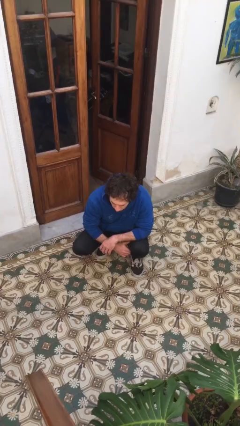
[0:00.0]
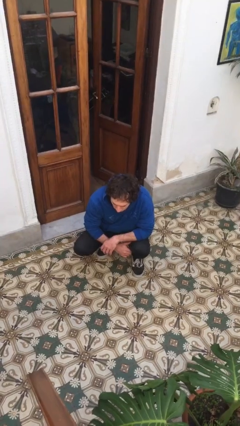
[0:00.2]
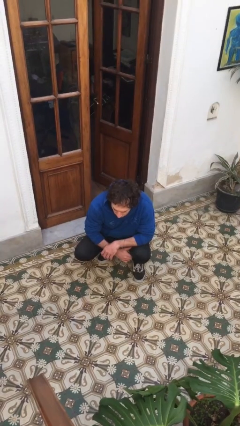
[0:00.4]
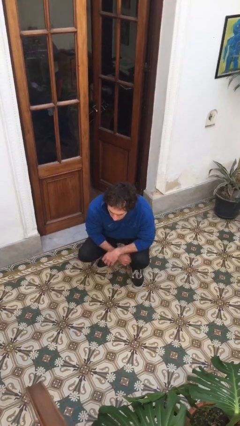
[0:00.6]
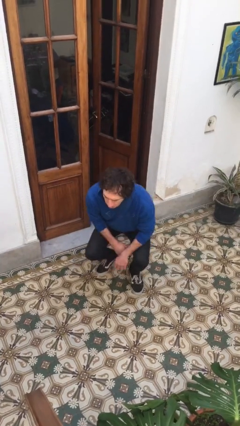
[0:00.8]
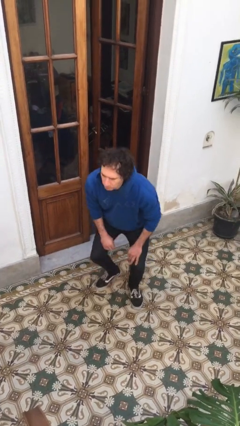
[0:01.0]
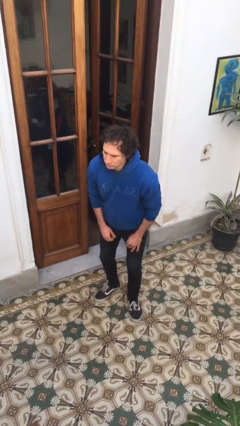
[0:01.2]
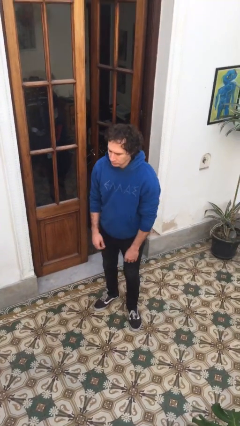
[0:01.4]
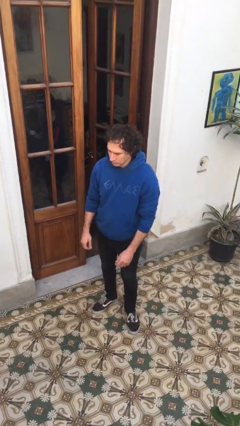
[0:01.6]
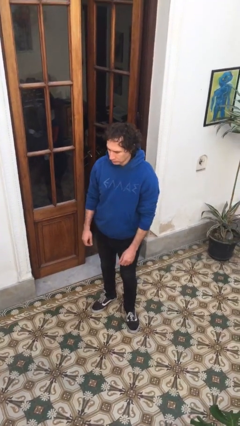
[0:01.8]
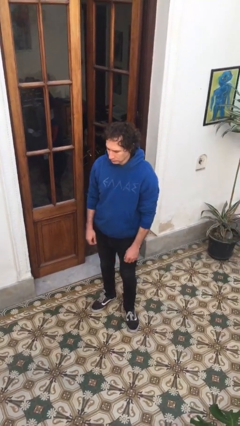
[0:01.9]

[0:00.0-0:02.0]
person stands up

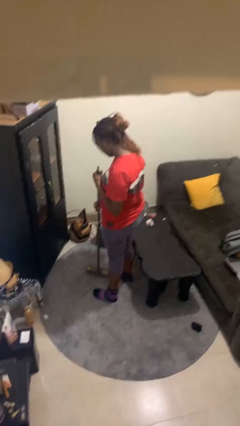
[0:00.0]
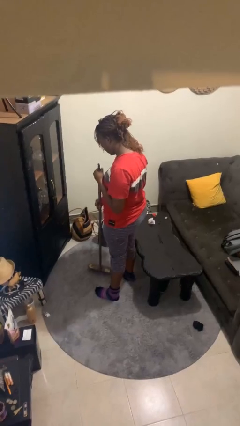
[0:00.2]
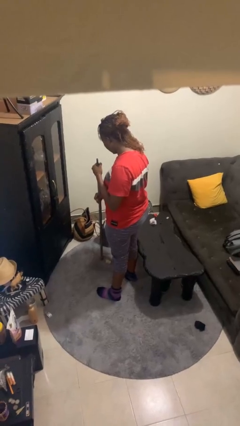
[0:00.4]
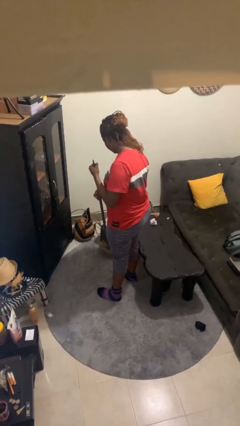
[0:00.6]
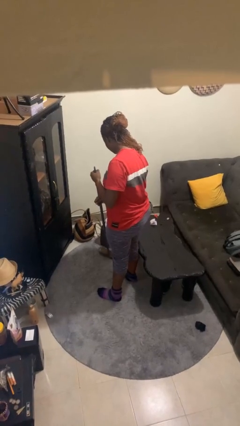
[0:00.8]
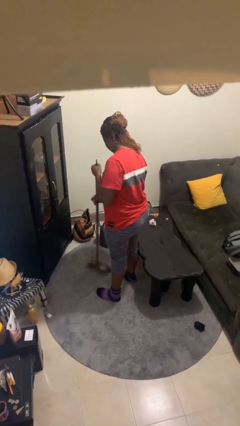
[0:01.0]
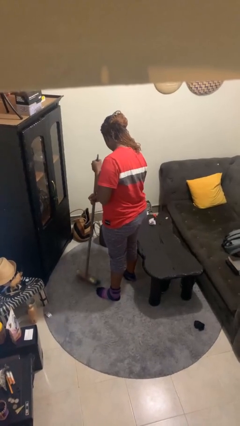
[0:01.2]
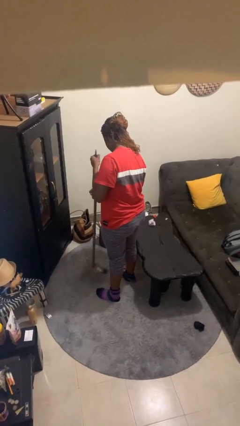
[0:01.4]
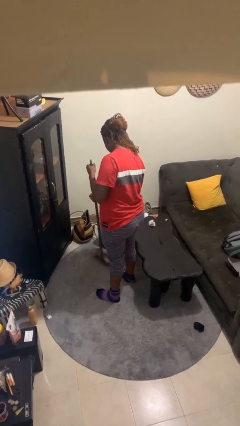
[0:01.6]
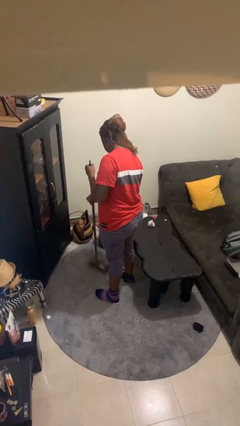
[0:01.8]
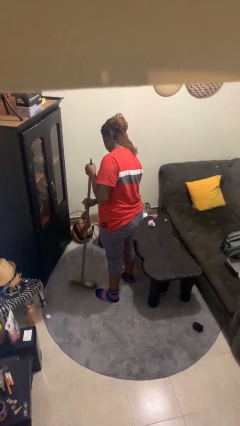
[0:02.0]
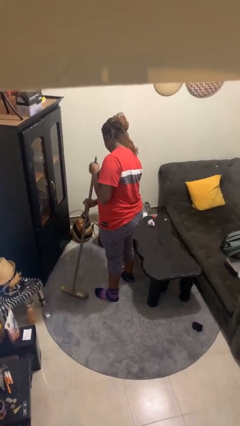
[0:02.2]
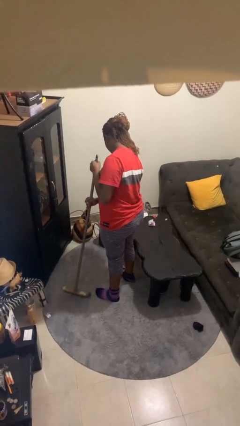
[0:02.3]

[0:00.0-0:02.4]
person sweeps floor

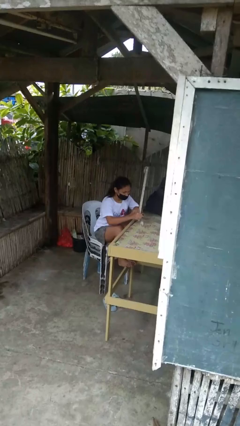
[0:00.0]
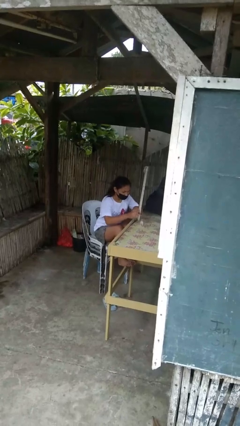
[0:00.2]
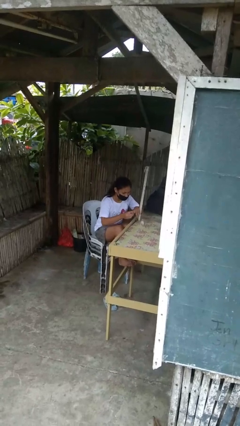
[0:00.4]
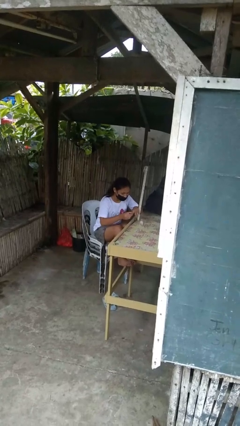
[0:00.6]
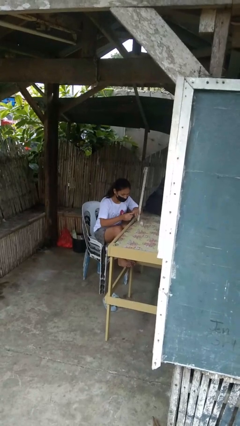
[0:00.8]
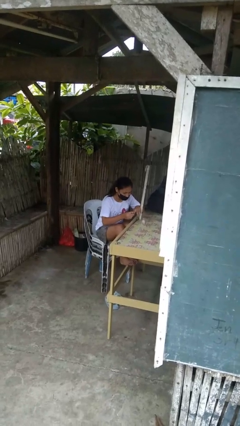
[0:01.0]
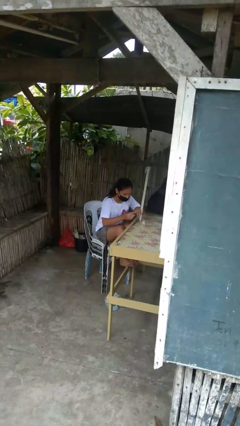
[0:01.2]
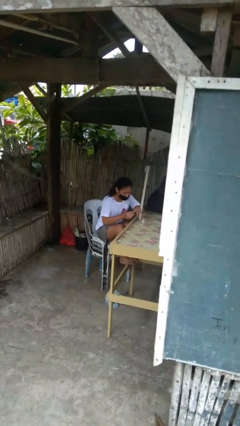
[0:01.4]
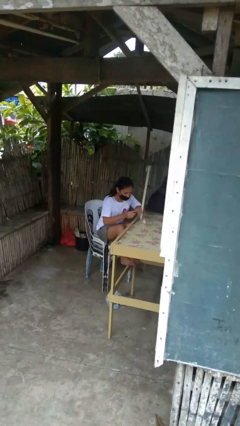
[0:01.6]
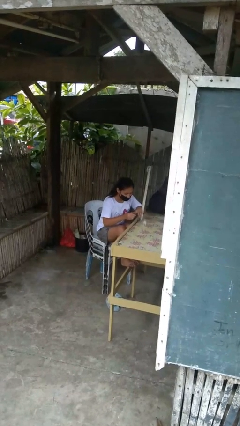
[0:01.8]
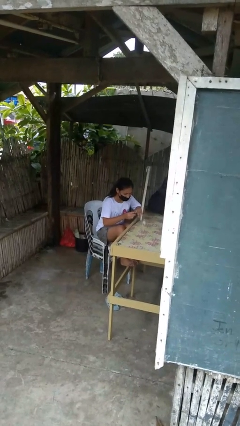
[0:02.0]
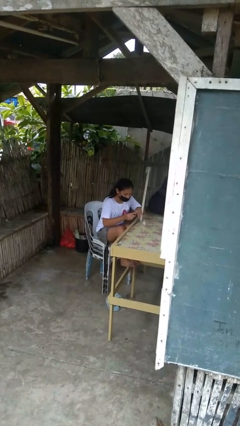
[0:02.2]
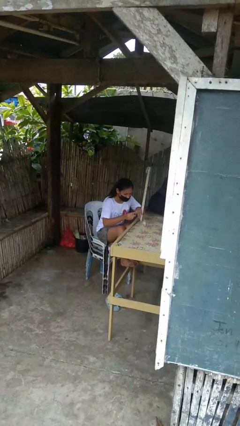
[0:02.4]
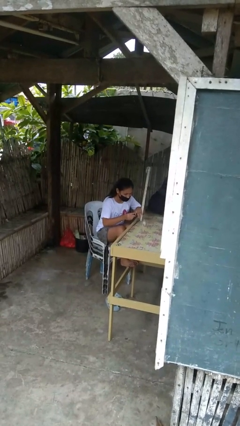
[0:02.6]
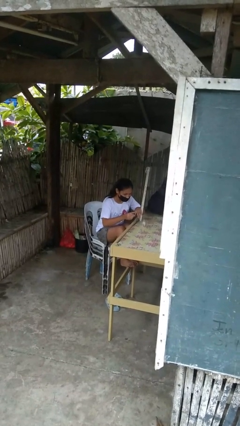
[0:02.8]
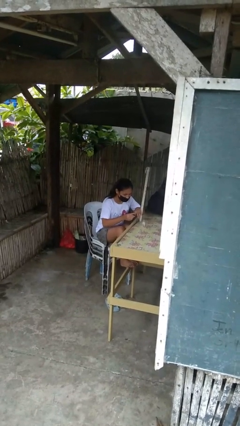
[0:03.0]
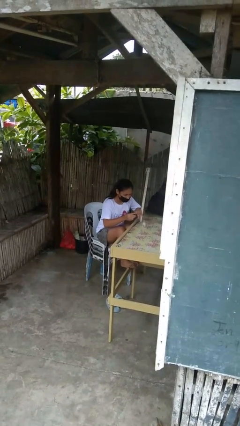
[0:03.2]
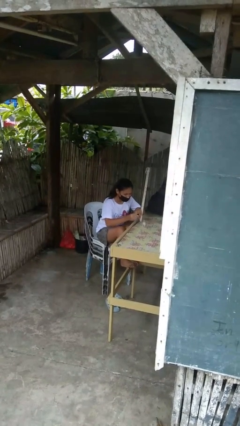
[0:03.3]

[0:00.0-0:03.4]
person paints fingernails

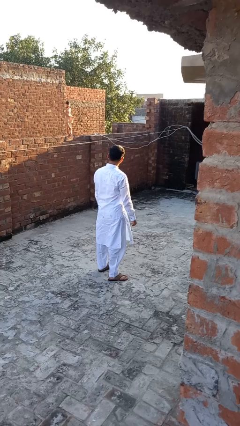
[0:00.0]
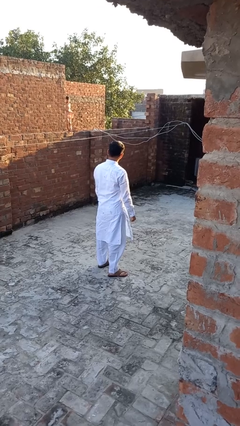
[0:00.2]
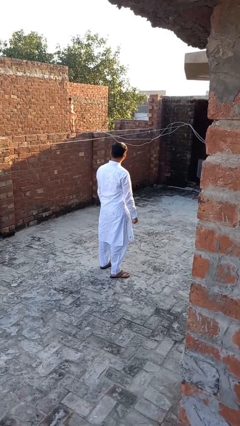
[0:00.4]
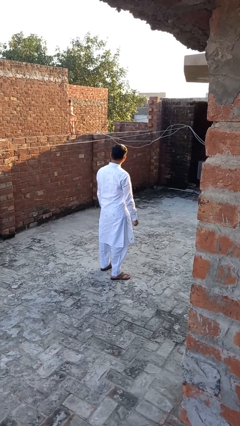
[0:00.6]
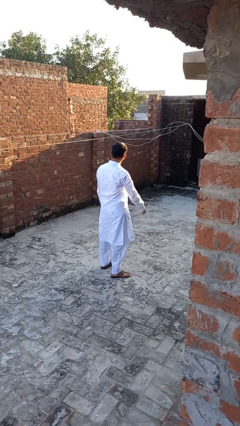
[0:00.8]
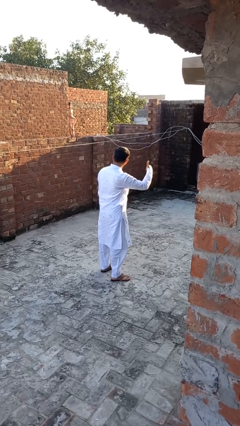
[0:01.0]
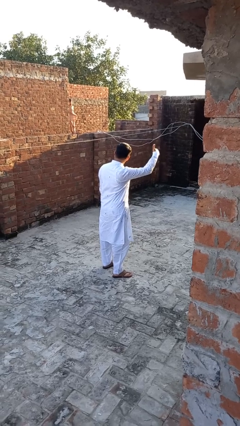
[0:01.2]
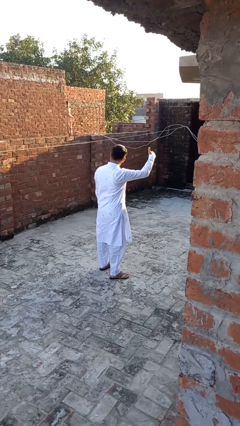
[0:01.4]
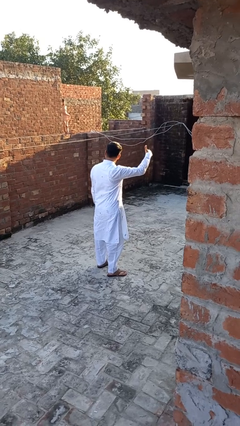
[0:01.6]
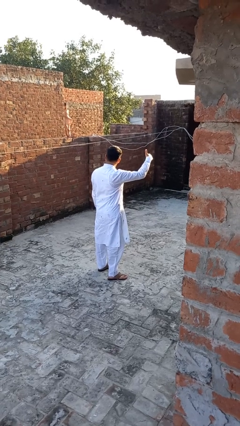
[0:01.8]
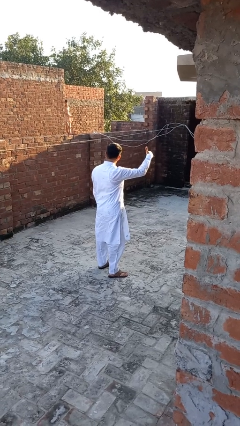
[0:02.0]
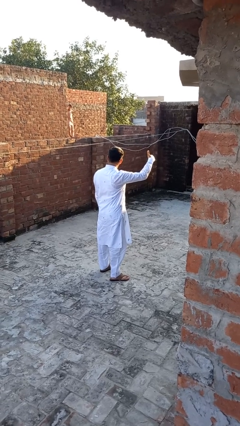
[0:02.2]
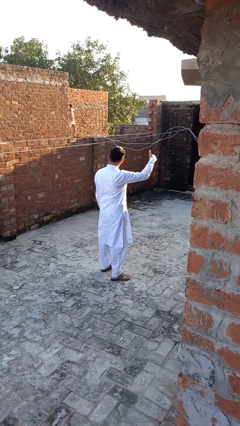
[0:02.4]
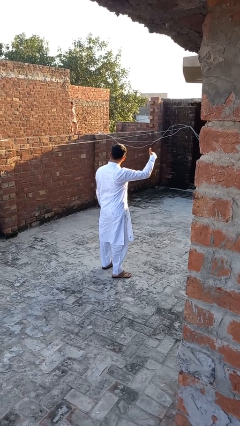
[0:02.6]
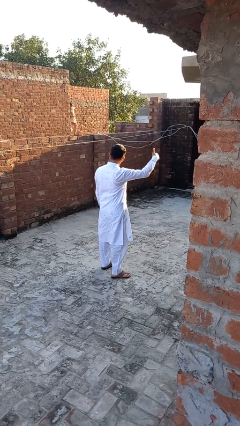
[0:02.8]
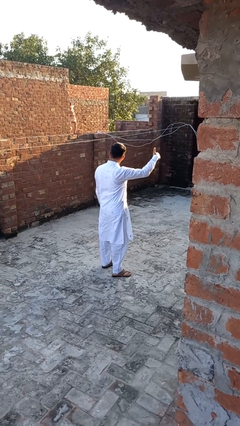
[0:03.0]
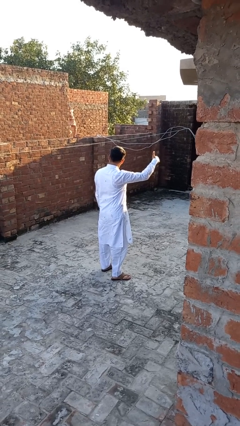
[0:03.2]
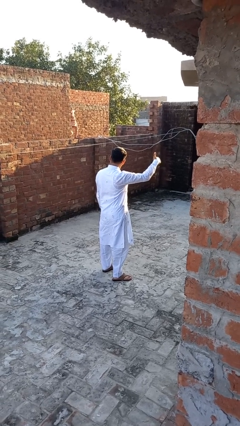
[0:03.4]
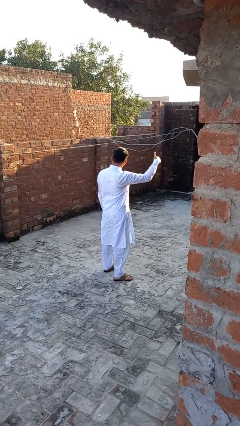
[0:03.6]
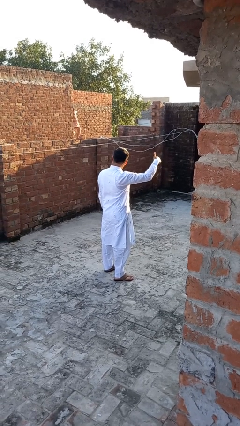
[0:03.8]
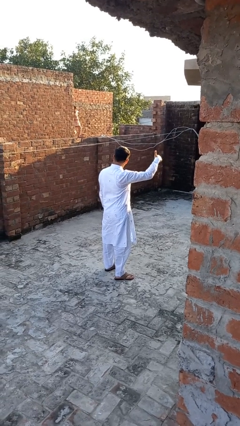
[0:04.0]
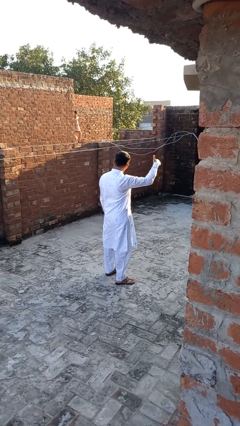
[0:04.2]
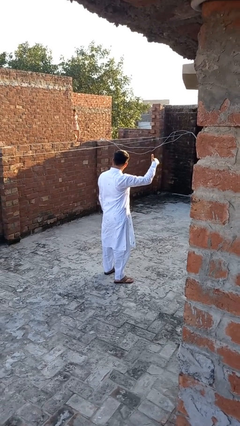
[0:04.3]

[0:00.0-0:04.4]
person gestures thumbs up

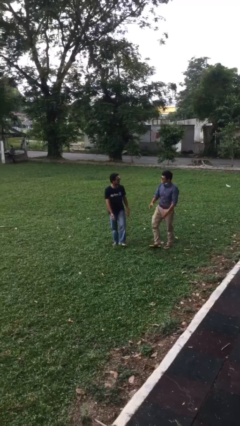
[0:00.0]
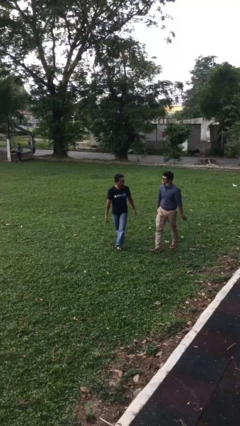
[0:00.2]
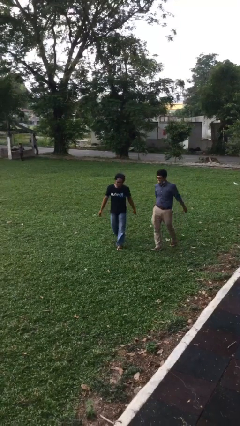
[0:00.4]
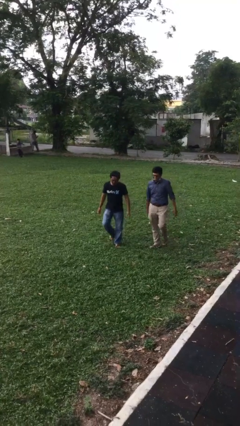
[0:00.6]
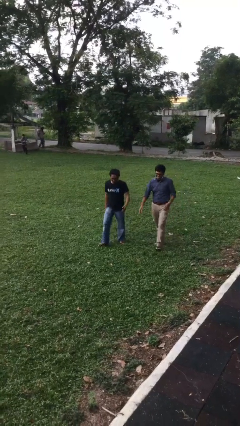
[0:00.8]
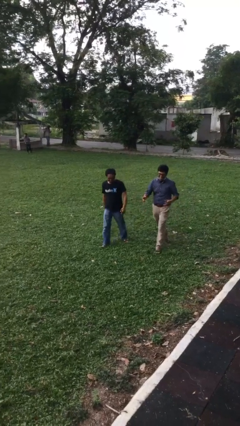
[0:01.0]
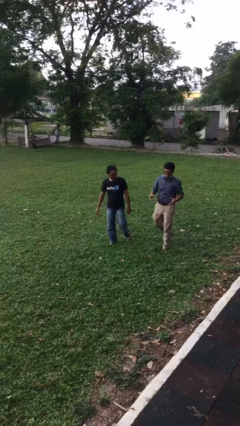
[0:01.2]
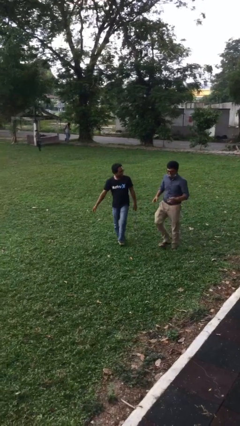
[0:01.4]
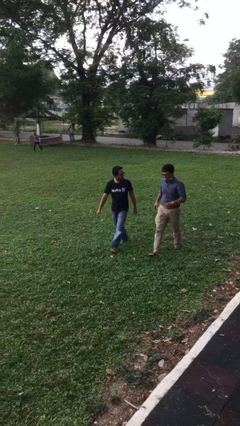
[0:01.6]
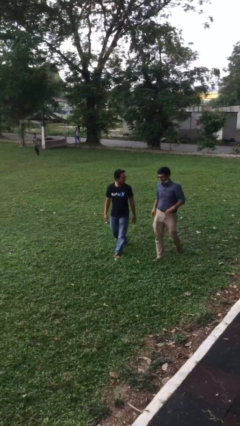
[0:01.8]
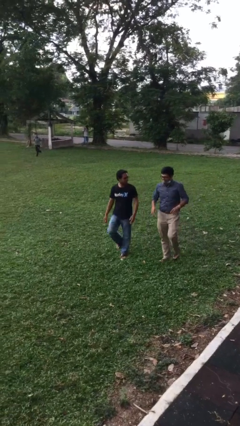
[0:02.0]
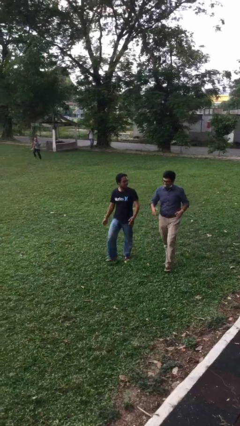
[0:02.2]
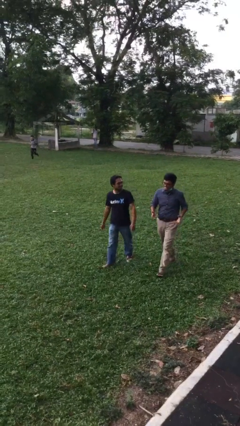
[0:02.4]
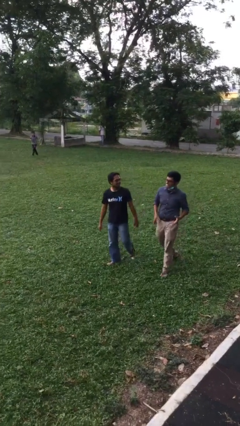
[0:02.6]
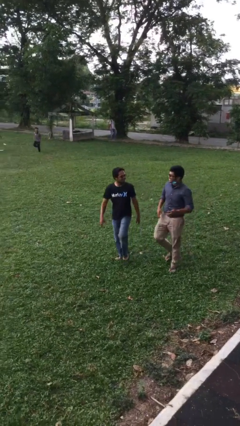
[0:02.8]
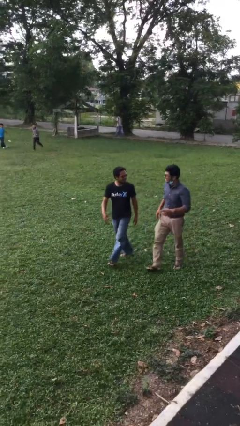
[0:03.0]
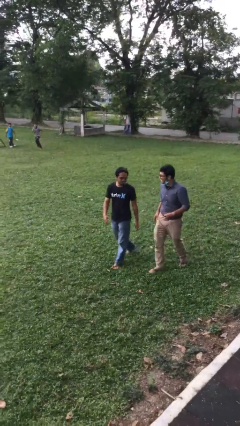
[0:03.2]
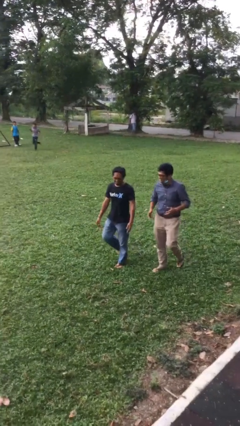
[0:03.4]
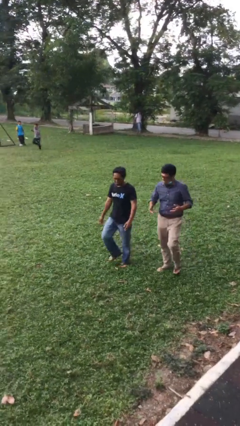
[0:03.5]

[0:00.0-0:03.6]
person talks to person

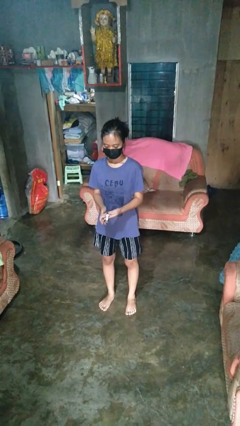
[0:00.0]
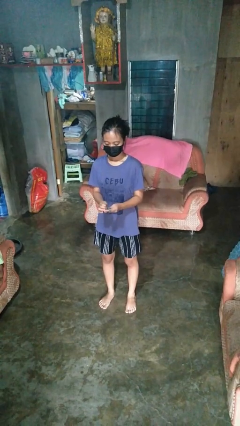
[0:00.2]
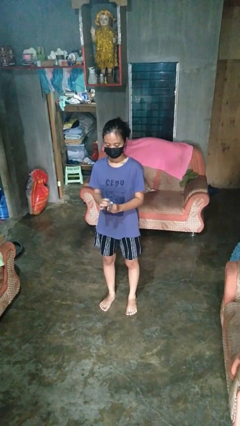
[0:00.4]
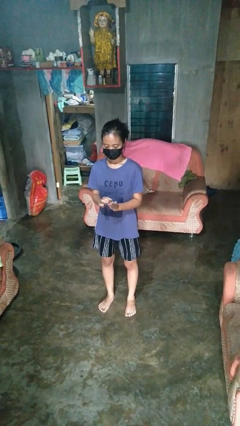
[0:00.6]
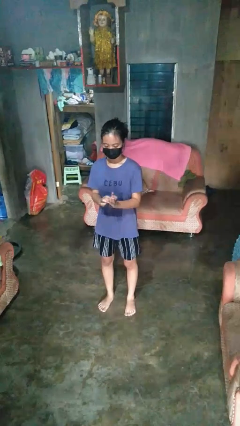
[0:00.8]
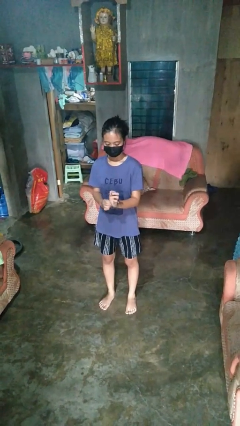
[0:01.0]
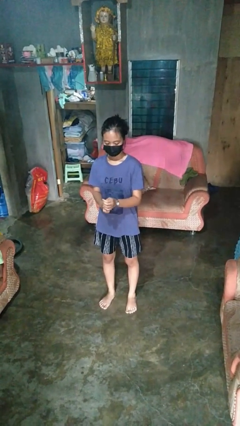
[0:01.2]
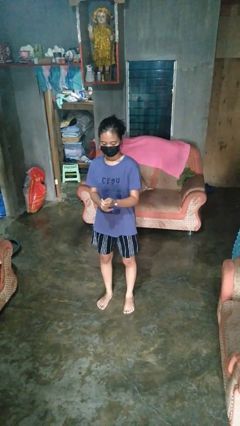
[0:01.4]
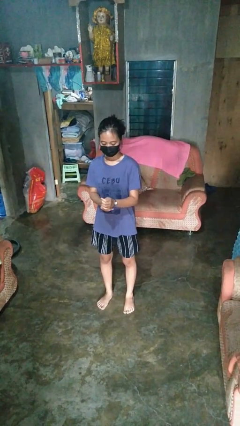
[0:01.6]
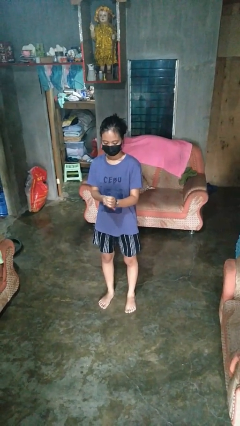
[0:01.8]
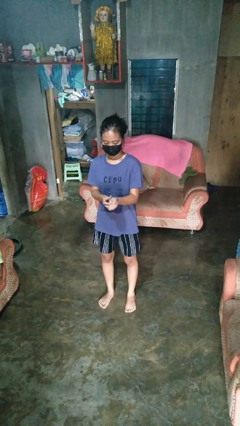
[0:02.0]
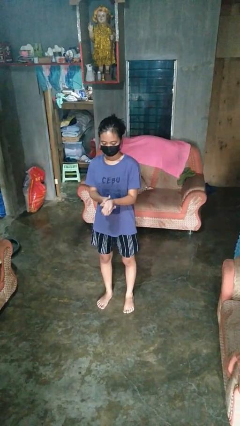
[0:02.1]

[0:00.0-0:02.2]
person puts on wristwatch
